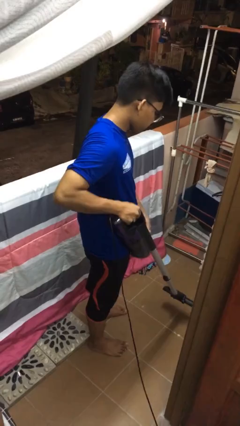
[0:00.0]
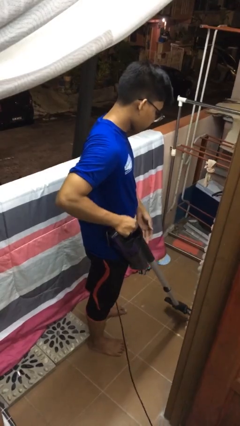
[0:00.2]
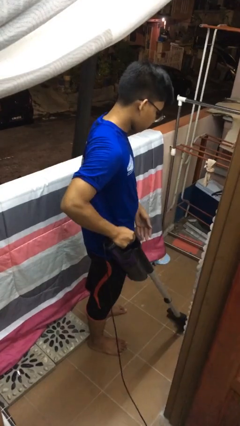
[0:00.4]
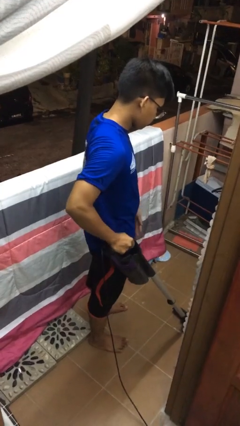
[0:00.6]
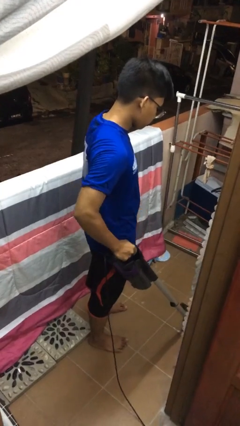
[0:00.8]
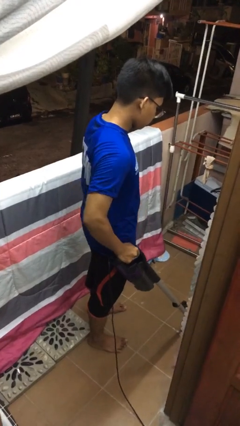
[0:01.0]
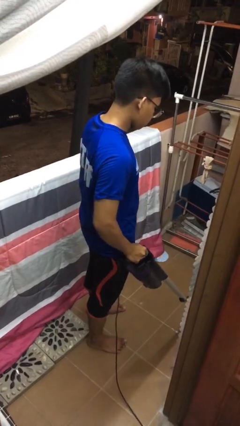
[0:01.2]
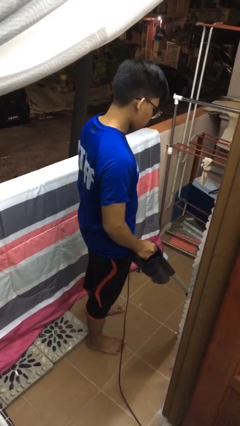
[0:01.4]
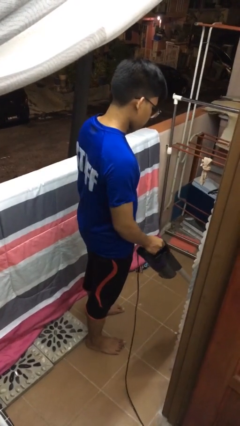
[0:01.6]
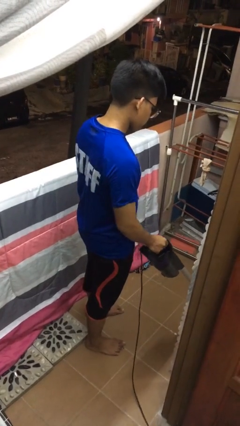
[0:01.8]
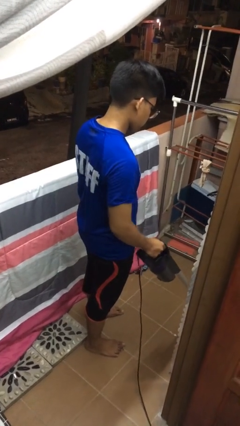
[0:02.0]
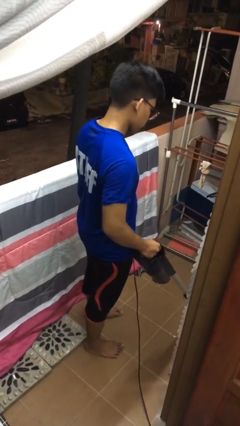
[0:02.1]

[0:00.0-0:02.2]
person vacuums carpet

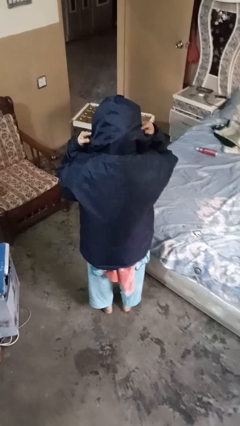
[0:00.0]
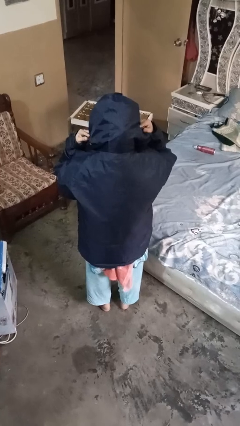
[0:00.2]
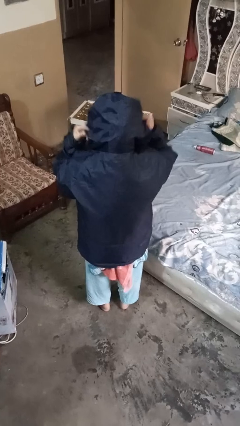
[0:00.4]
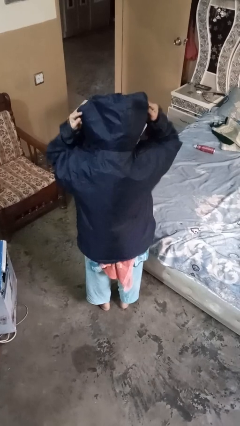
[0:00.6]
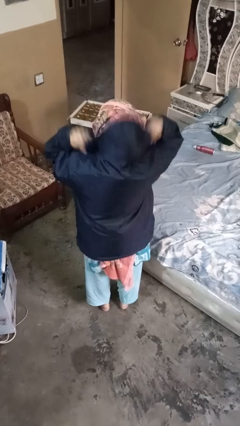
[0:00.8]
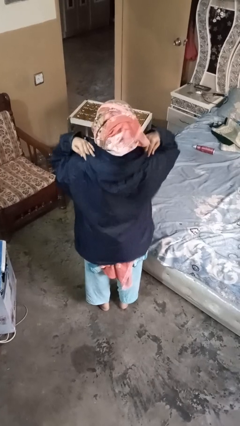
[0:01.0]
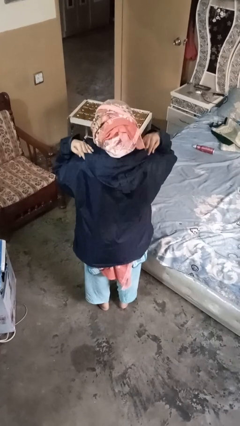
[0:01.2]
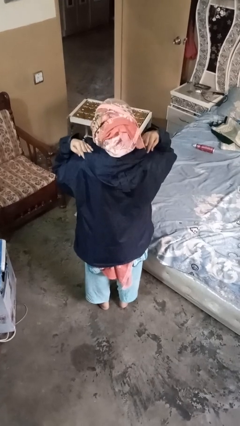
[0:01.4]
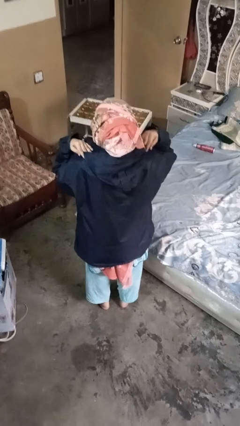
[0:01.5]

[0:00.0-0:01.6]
person takes off hoodie

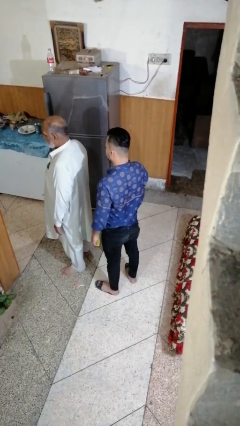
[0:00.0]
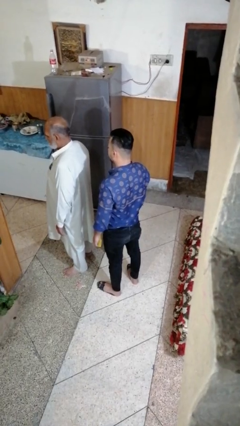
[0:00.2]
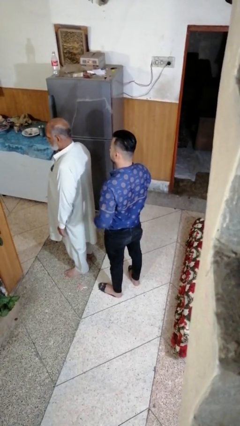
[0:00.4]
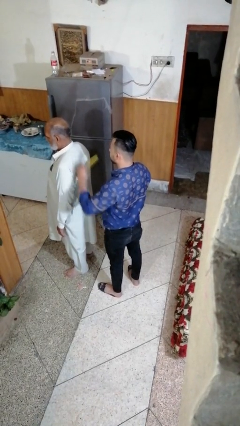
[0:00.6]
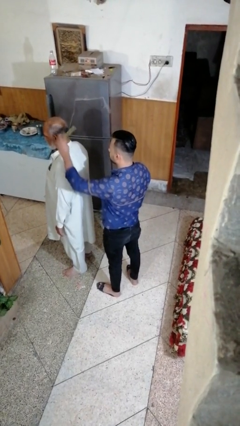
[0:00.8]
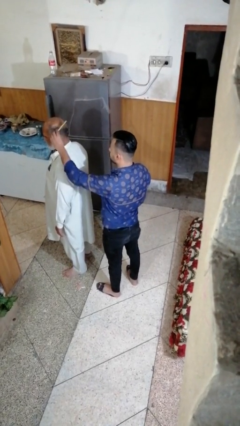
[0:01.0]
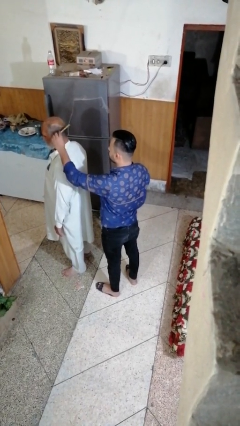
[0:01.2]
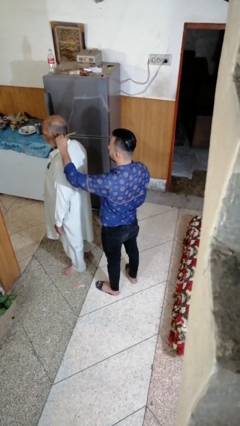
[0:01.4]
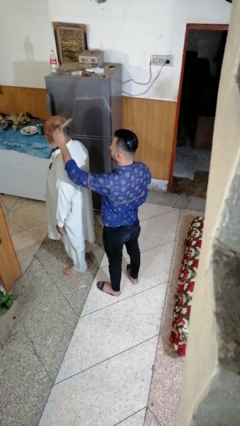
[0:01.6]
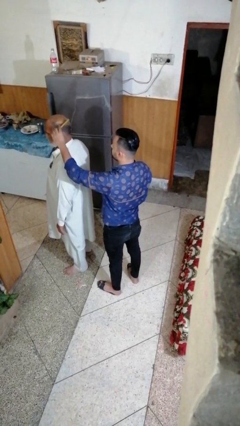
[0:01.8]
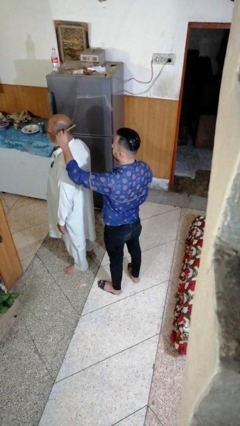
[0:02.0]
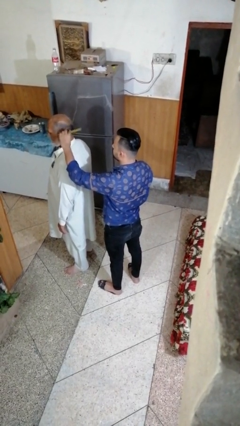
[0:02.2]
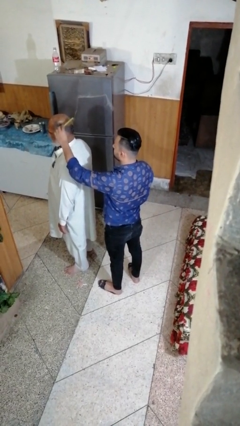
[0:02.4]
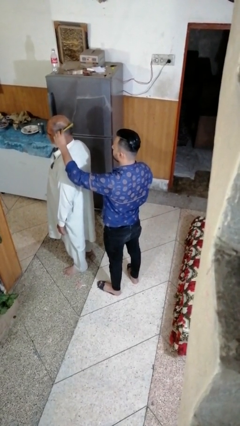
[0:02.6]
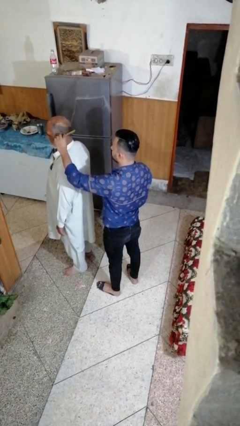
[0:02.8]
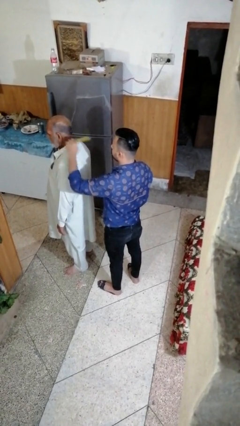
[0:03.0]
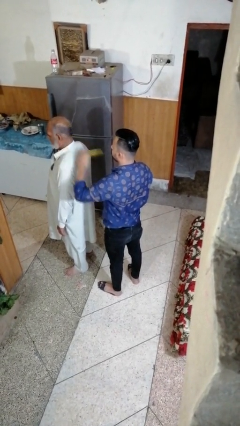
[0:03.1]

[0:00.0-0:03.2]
person brushes hair of person

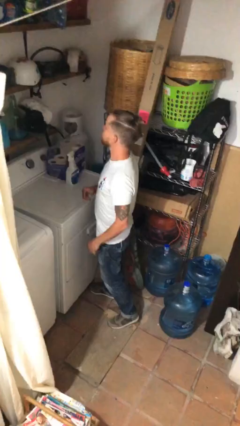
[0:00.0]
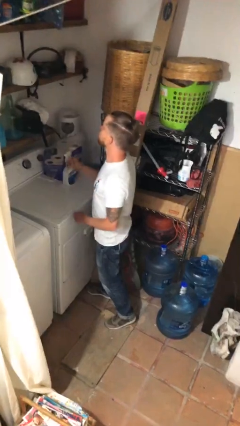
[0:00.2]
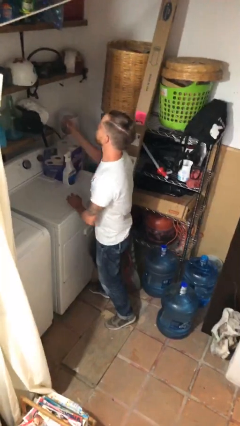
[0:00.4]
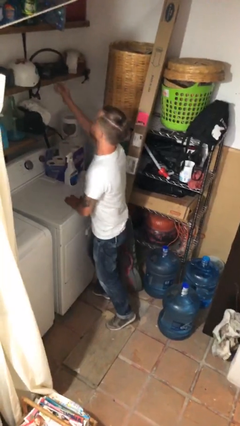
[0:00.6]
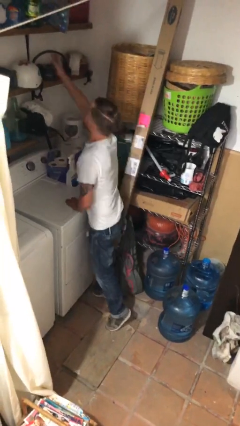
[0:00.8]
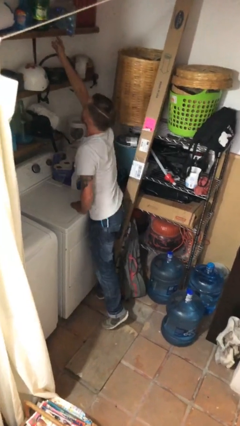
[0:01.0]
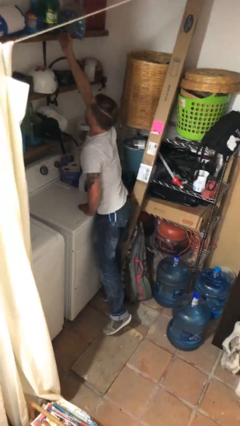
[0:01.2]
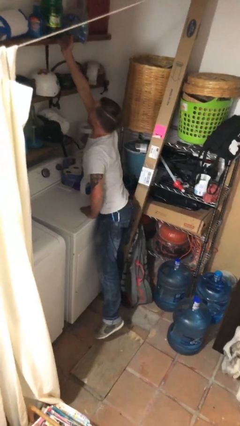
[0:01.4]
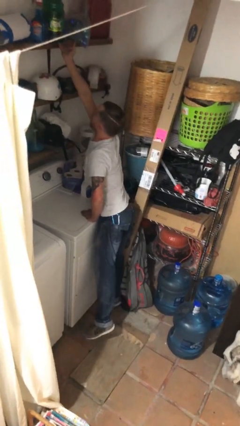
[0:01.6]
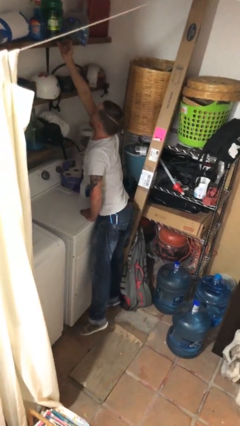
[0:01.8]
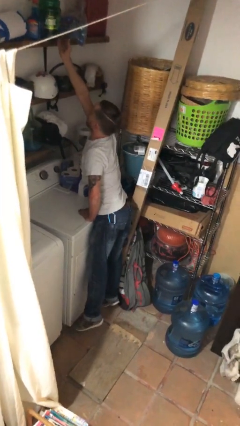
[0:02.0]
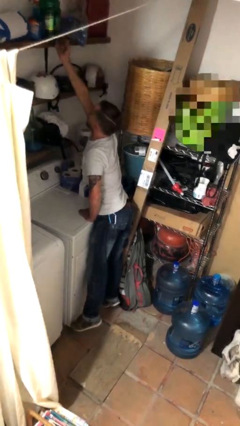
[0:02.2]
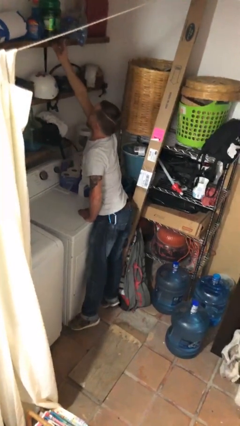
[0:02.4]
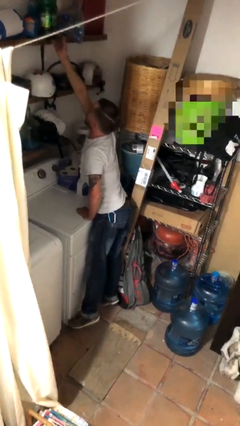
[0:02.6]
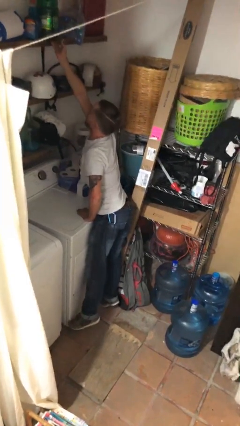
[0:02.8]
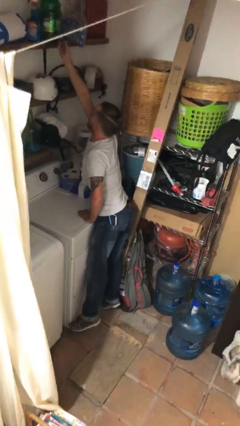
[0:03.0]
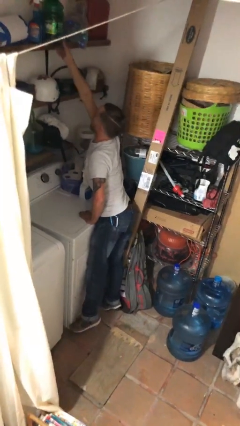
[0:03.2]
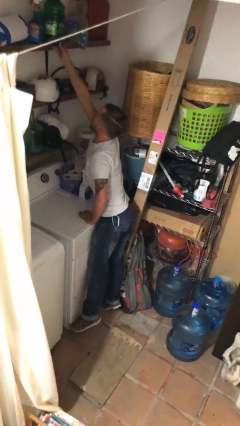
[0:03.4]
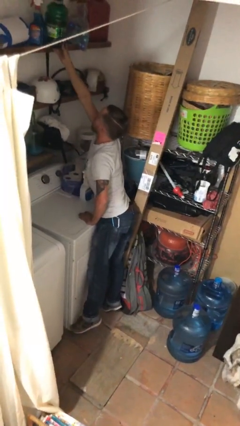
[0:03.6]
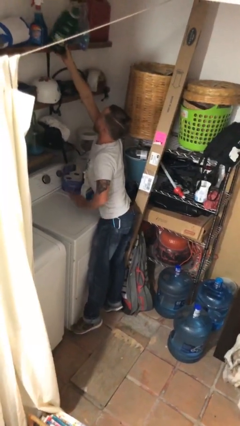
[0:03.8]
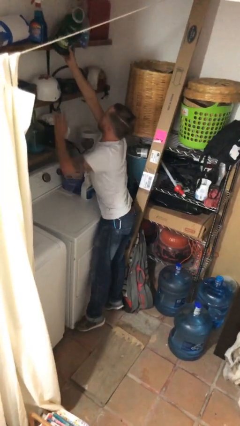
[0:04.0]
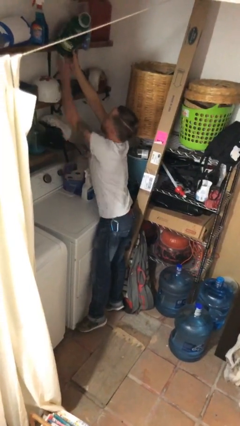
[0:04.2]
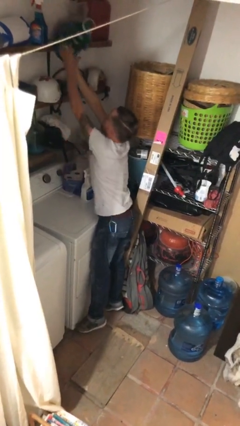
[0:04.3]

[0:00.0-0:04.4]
person picks up object from shelf

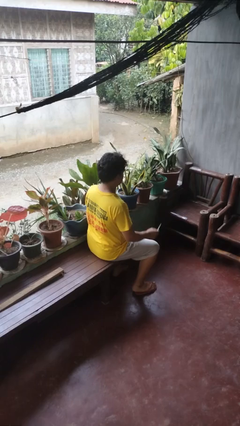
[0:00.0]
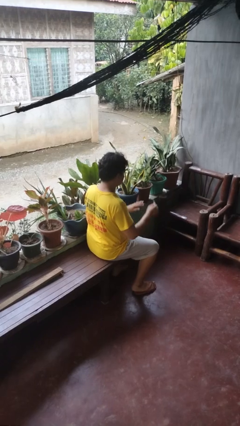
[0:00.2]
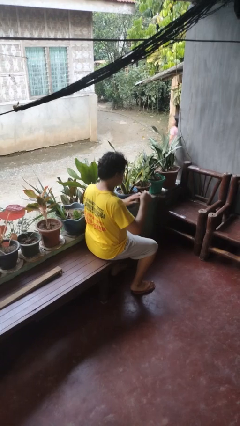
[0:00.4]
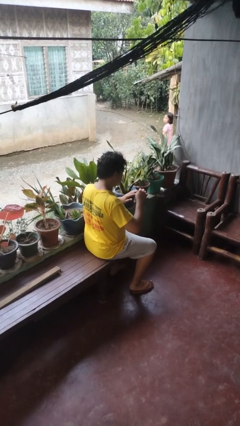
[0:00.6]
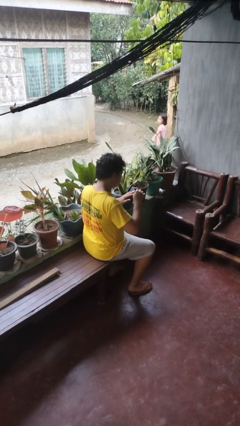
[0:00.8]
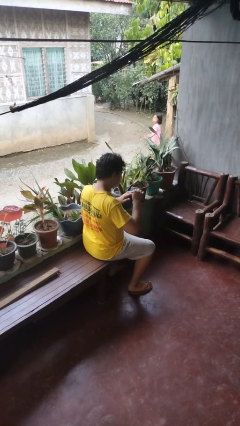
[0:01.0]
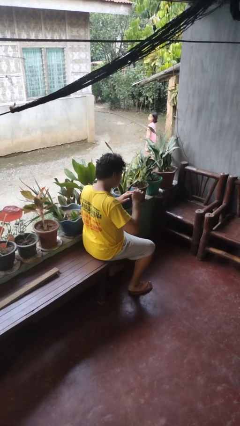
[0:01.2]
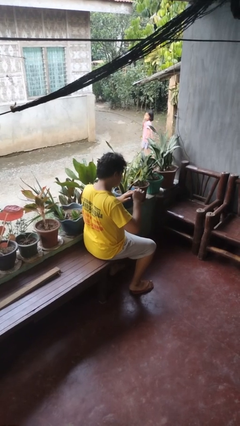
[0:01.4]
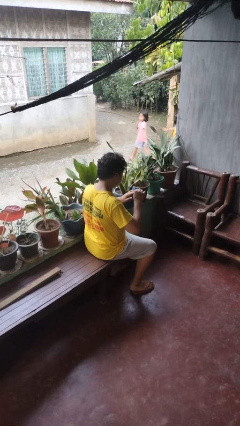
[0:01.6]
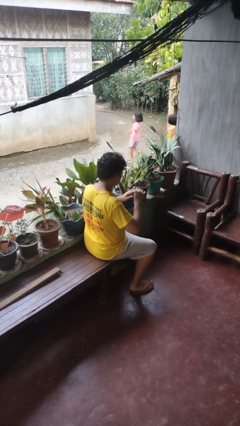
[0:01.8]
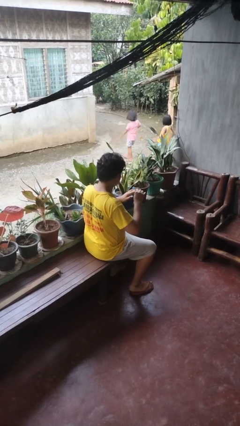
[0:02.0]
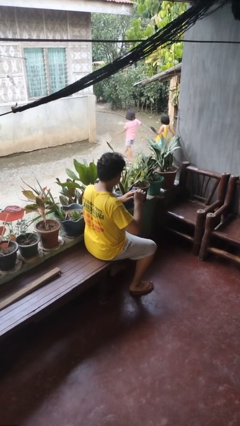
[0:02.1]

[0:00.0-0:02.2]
person files fingernails

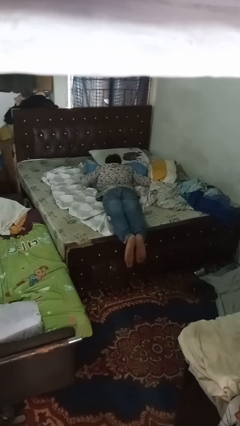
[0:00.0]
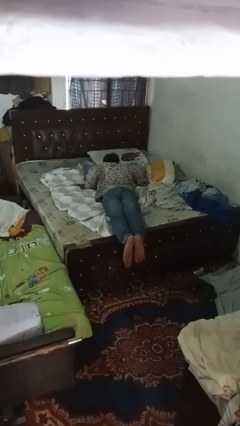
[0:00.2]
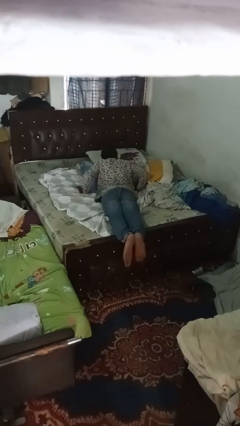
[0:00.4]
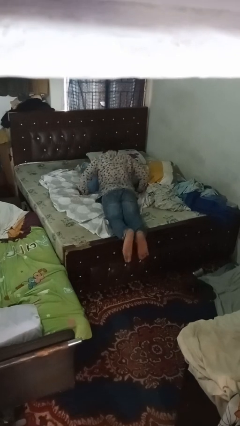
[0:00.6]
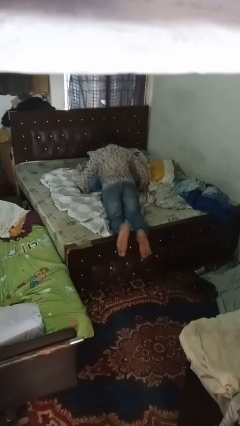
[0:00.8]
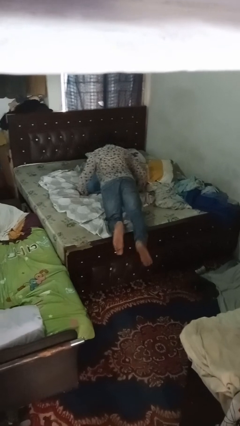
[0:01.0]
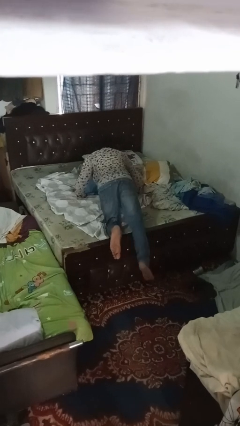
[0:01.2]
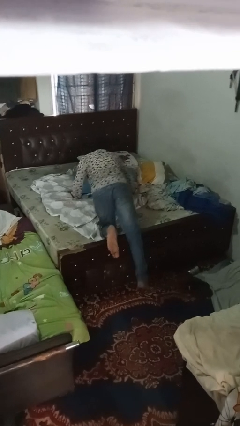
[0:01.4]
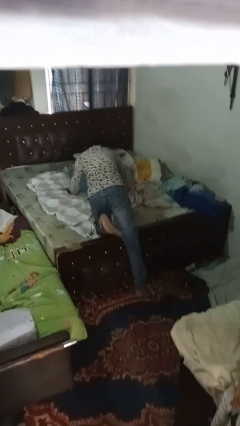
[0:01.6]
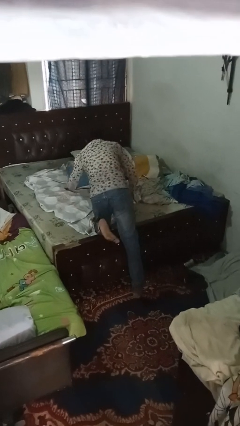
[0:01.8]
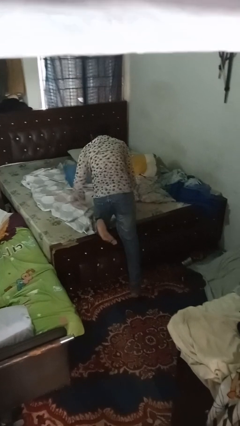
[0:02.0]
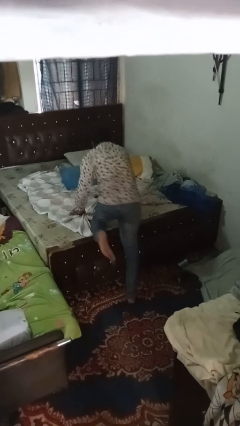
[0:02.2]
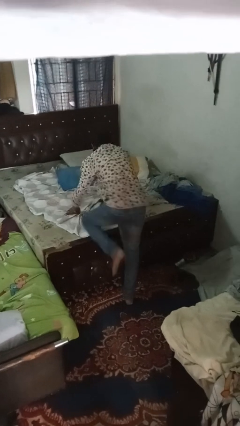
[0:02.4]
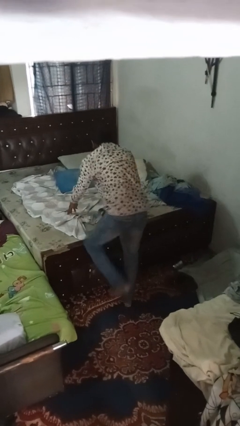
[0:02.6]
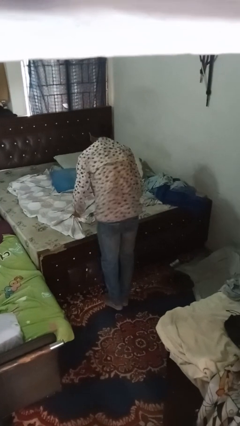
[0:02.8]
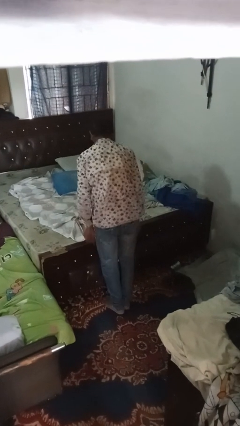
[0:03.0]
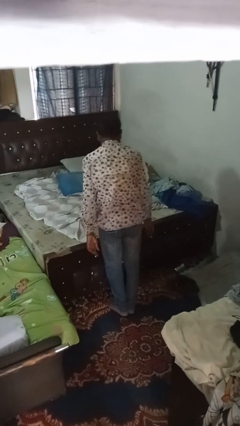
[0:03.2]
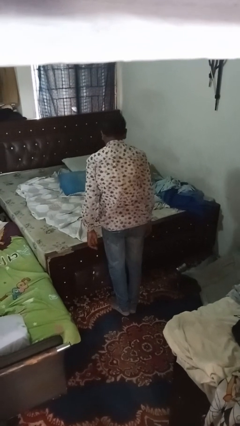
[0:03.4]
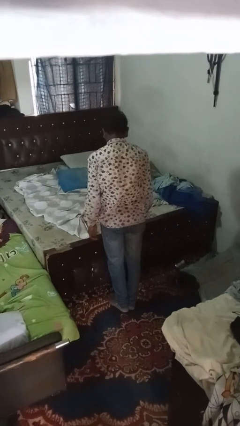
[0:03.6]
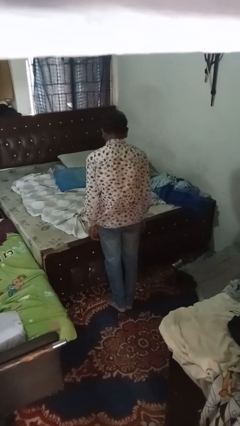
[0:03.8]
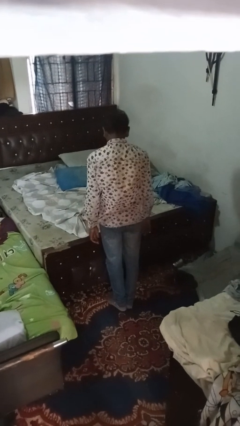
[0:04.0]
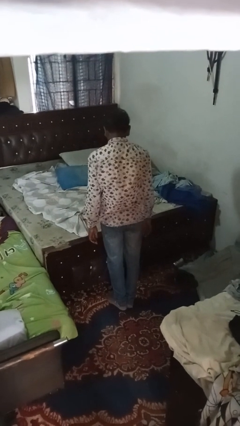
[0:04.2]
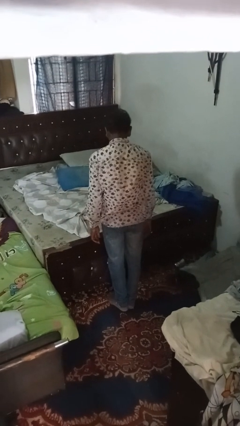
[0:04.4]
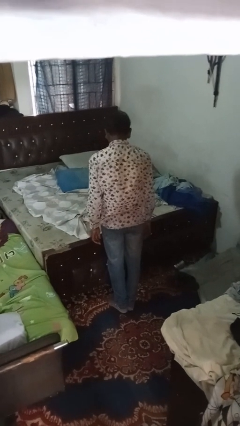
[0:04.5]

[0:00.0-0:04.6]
person stands up
